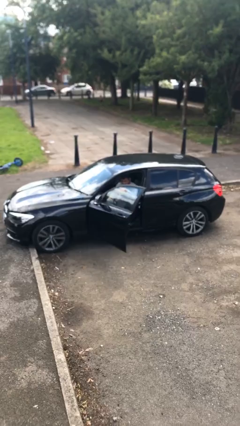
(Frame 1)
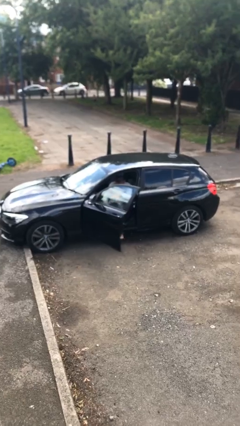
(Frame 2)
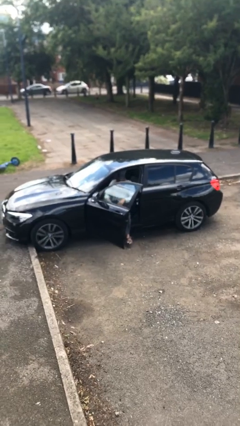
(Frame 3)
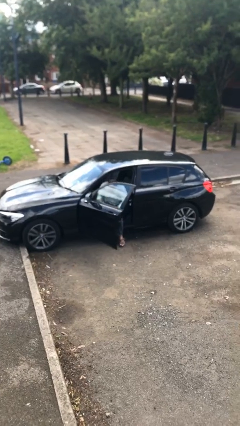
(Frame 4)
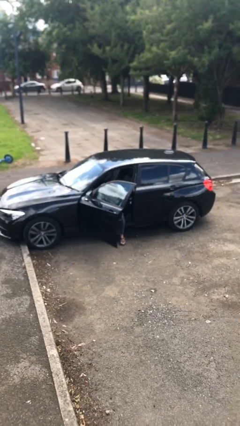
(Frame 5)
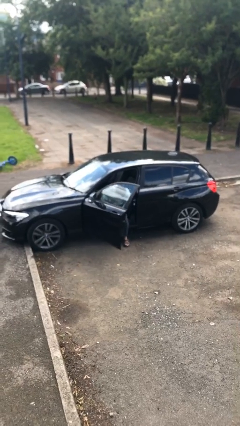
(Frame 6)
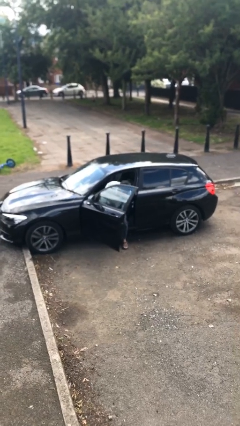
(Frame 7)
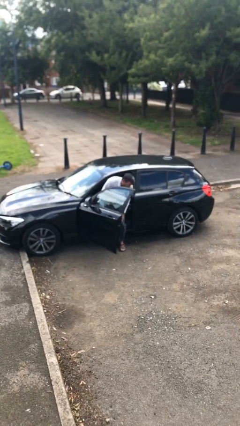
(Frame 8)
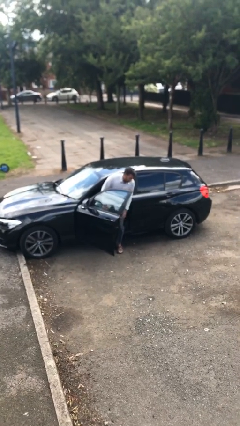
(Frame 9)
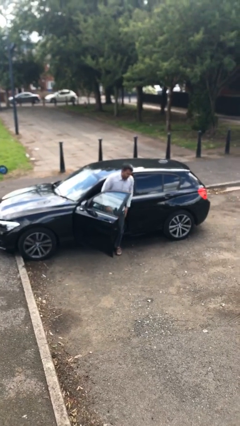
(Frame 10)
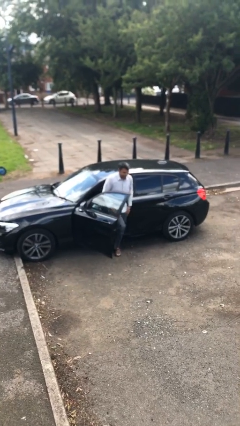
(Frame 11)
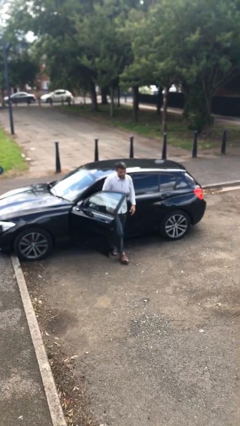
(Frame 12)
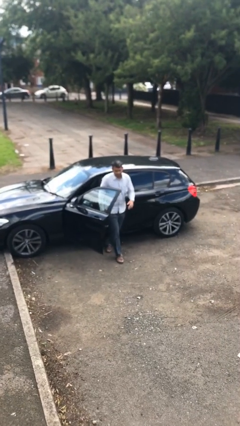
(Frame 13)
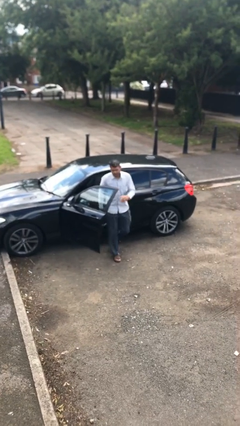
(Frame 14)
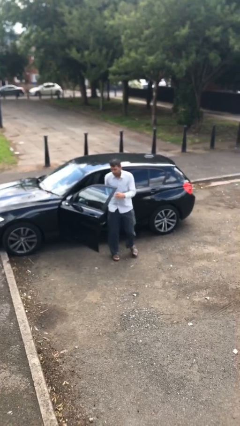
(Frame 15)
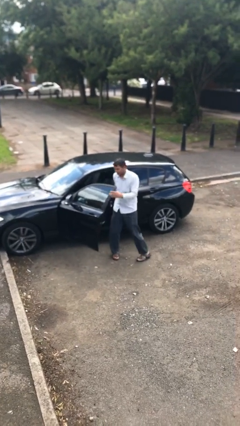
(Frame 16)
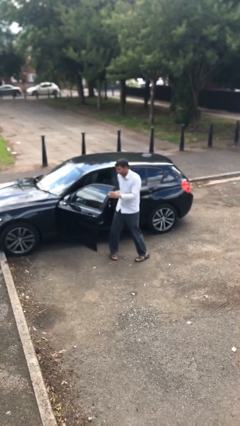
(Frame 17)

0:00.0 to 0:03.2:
person exits car

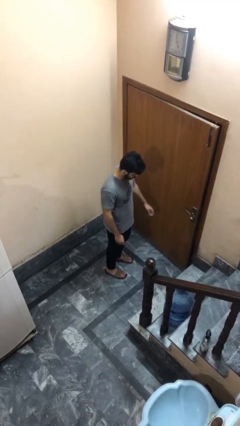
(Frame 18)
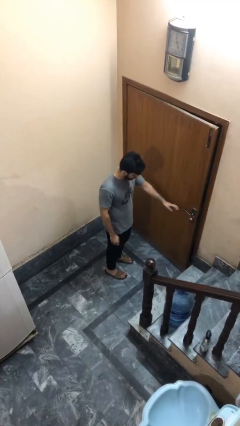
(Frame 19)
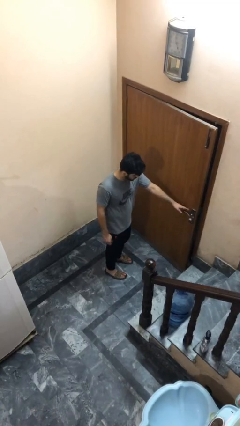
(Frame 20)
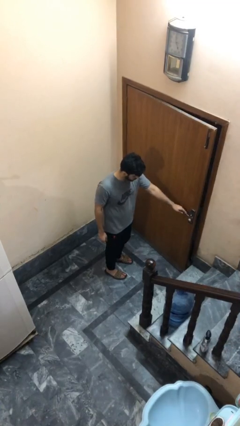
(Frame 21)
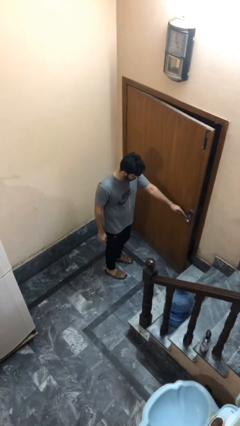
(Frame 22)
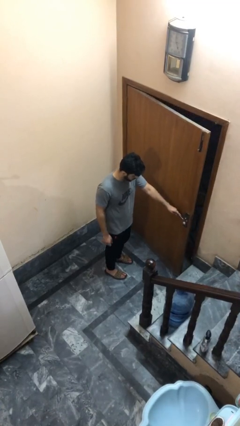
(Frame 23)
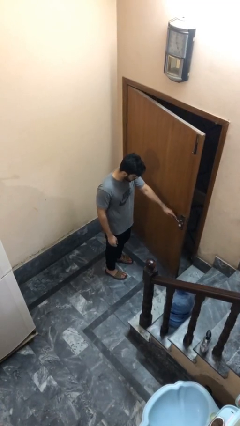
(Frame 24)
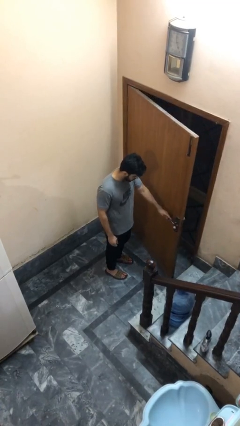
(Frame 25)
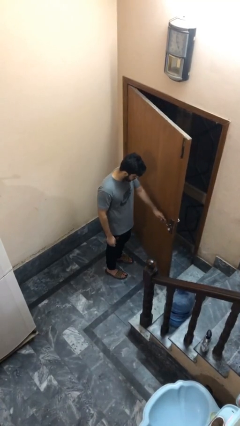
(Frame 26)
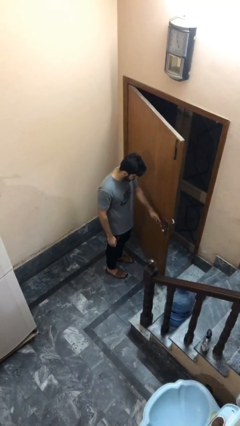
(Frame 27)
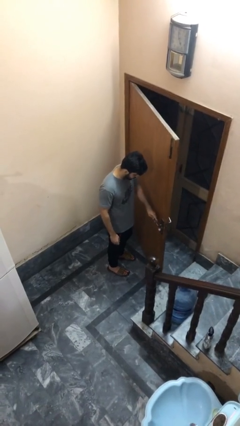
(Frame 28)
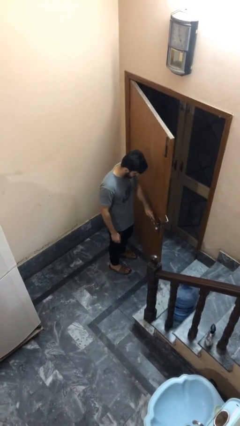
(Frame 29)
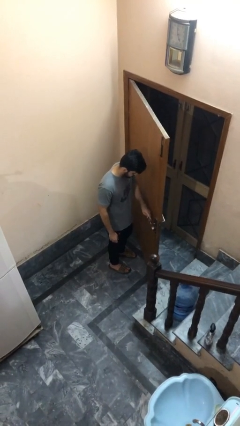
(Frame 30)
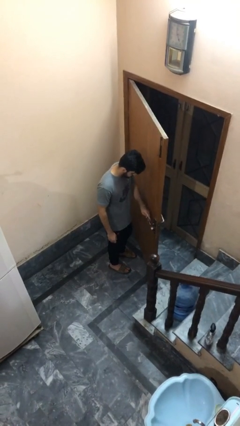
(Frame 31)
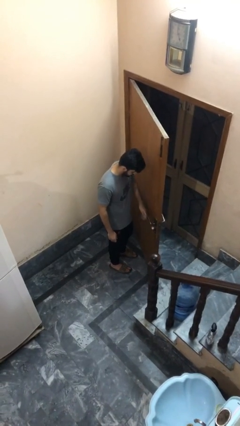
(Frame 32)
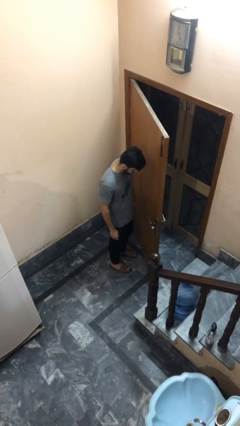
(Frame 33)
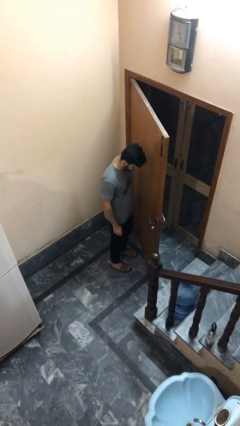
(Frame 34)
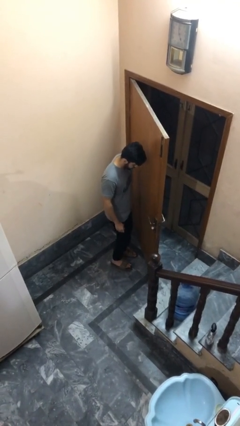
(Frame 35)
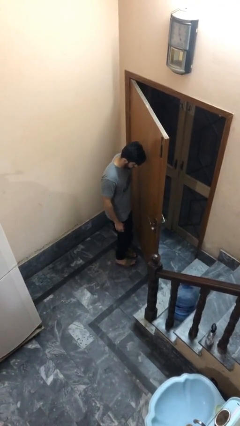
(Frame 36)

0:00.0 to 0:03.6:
person opens facility door

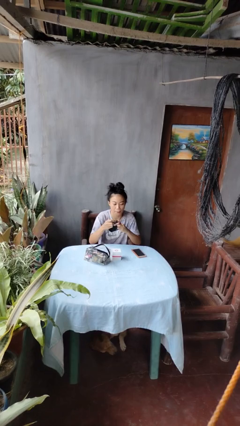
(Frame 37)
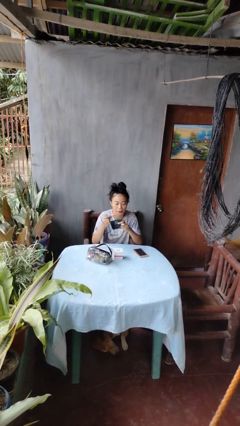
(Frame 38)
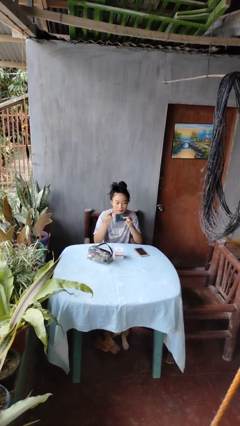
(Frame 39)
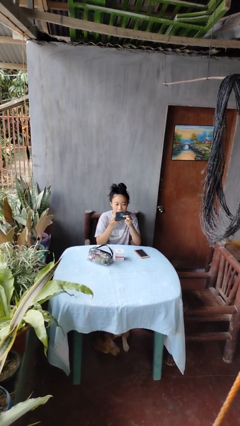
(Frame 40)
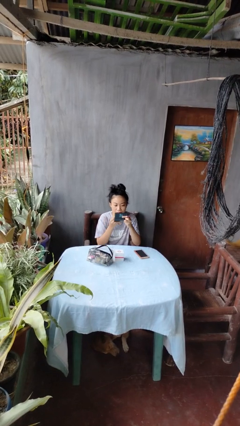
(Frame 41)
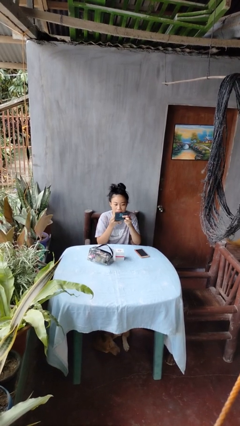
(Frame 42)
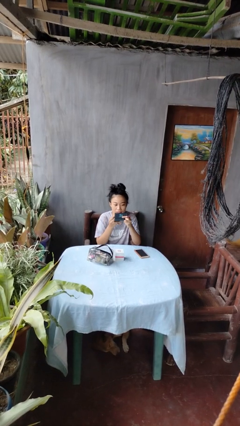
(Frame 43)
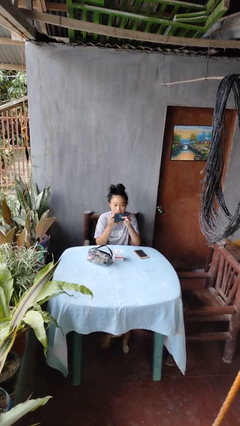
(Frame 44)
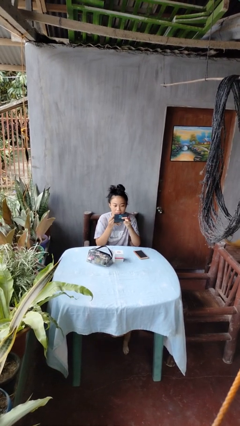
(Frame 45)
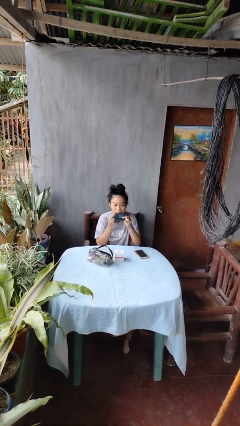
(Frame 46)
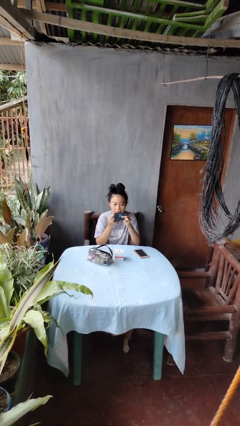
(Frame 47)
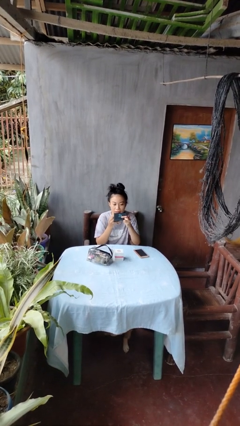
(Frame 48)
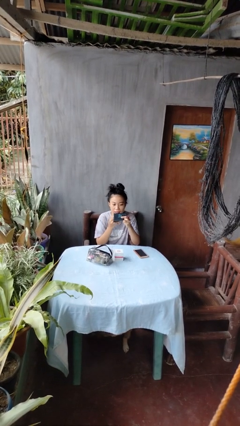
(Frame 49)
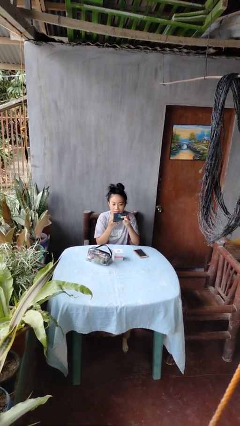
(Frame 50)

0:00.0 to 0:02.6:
person applies lip makeup

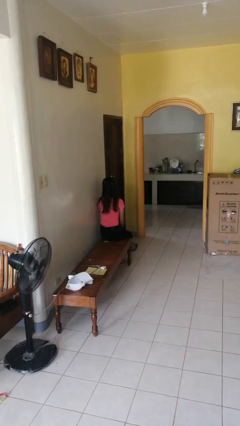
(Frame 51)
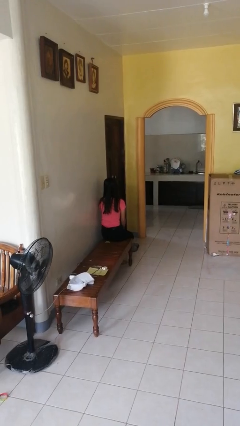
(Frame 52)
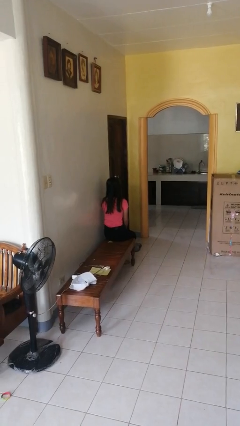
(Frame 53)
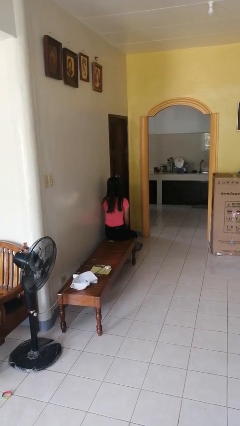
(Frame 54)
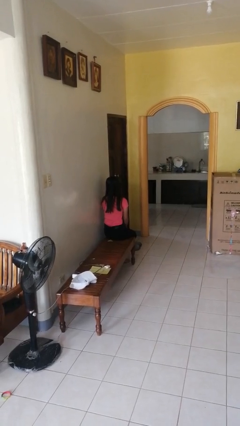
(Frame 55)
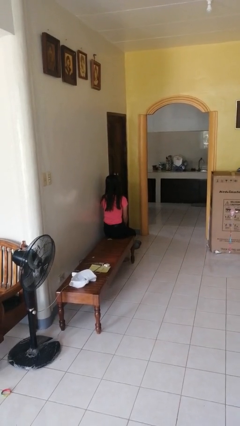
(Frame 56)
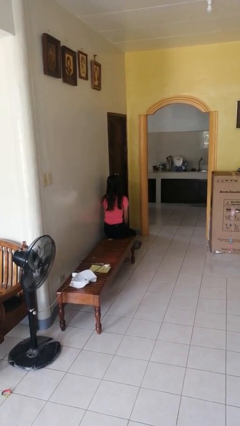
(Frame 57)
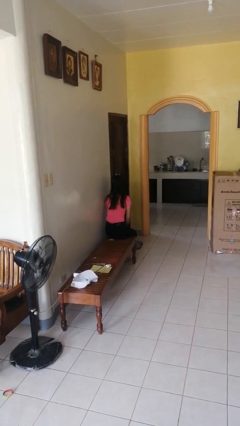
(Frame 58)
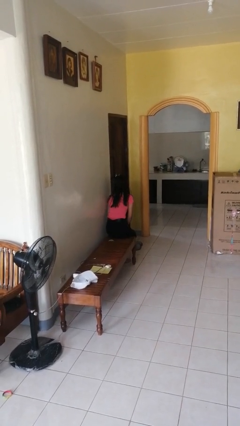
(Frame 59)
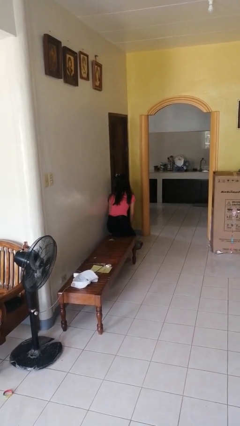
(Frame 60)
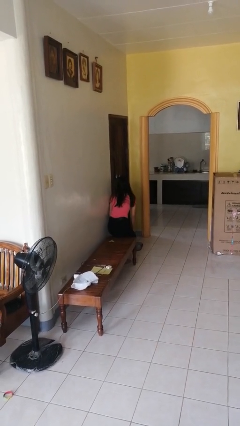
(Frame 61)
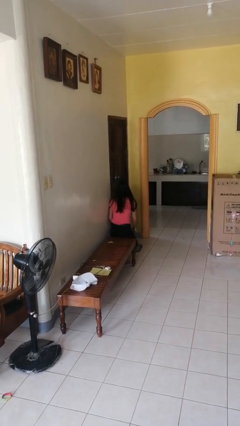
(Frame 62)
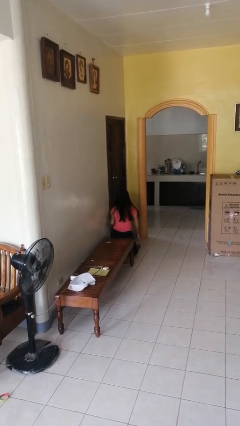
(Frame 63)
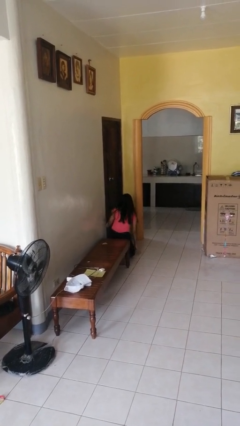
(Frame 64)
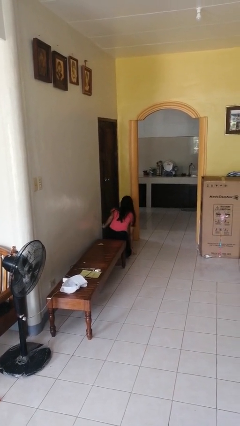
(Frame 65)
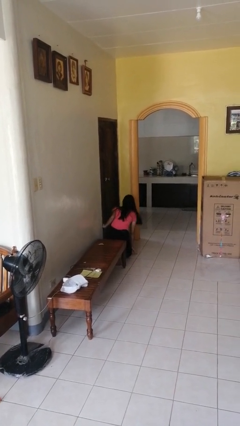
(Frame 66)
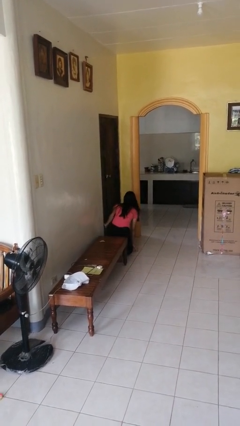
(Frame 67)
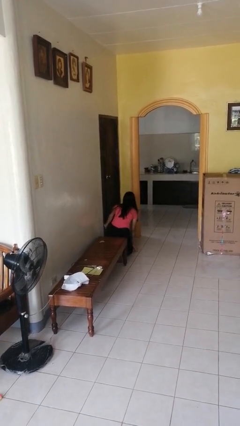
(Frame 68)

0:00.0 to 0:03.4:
person falls from chair

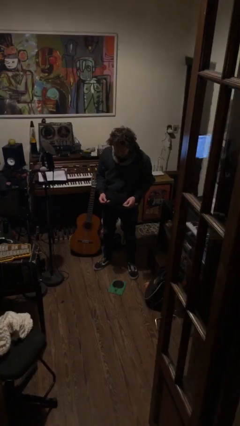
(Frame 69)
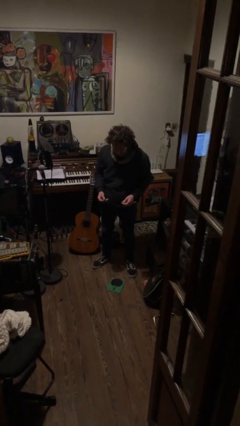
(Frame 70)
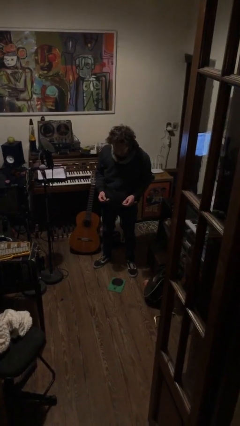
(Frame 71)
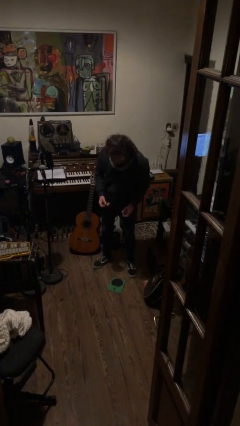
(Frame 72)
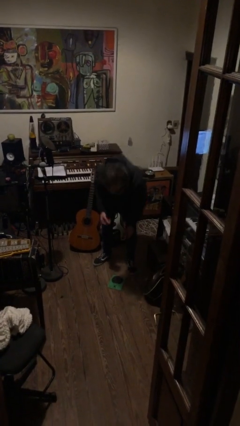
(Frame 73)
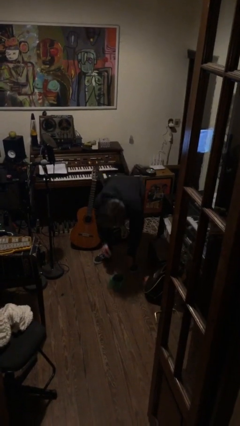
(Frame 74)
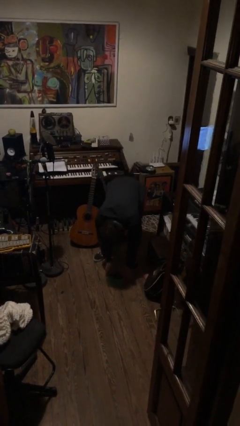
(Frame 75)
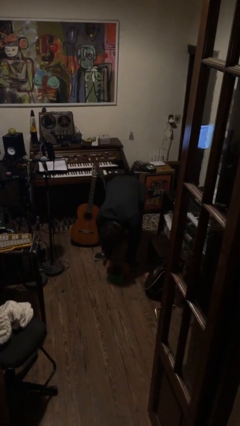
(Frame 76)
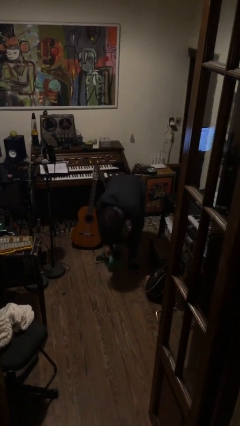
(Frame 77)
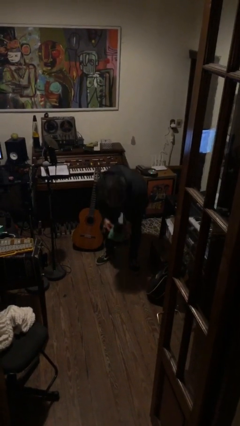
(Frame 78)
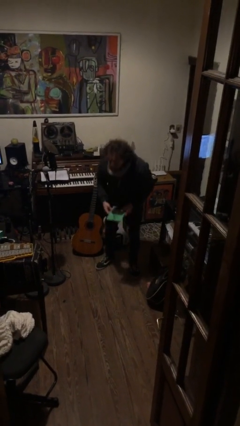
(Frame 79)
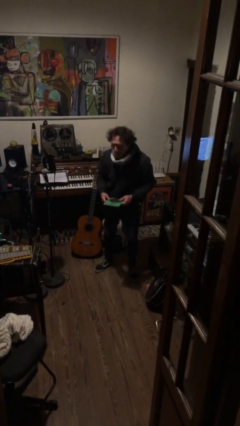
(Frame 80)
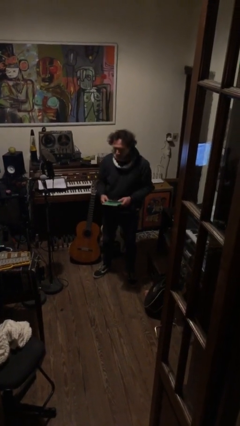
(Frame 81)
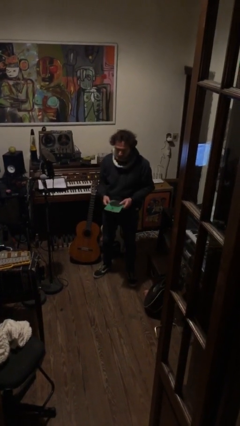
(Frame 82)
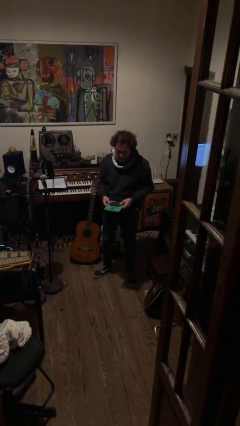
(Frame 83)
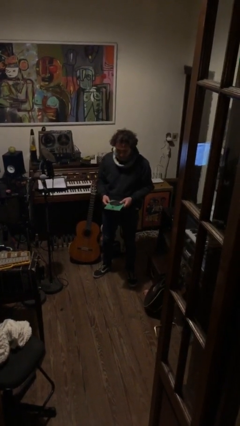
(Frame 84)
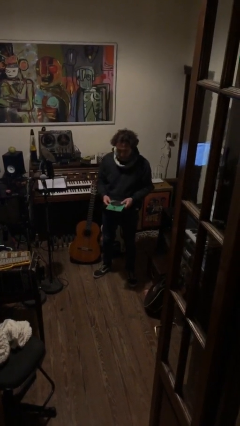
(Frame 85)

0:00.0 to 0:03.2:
person picks up object from floor

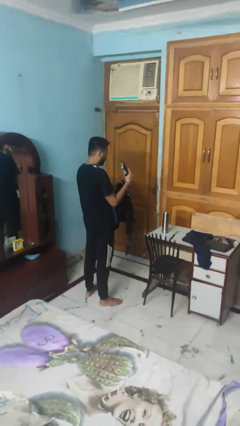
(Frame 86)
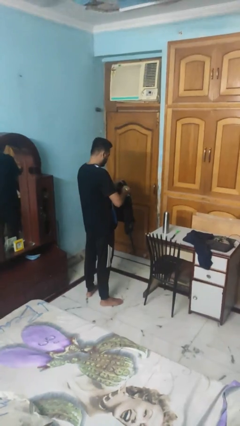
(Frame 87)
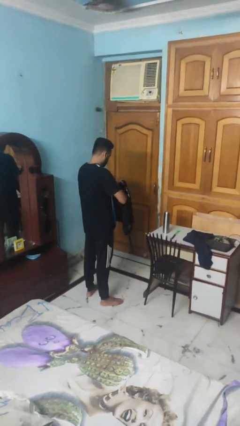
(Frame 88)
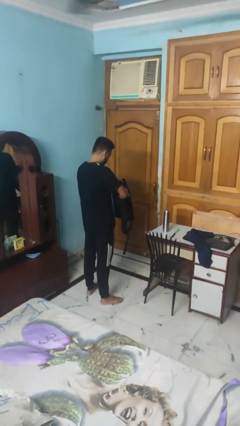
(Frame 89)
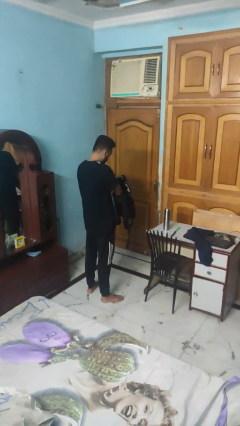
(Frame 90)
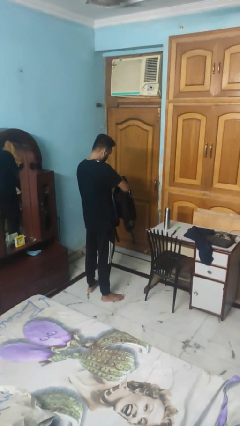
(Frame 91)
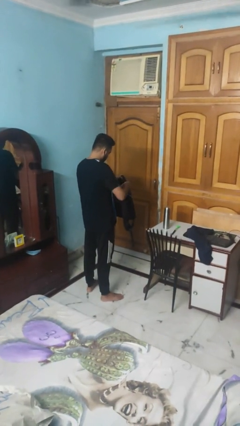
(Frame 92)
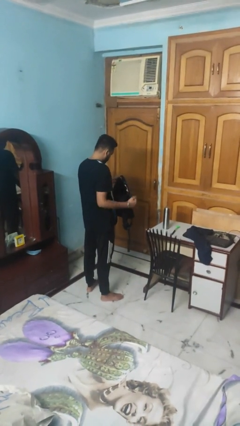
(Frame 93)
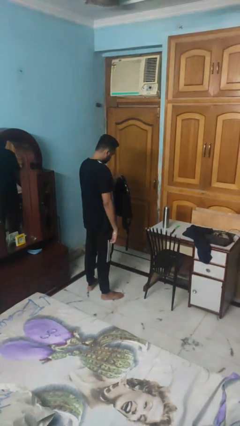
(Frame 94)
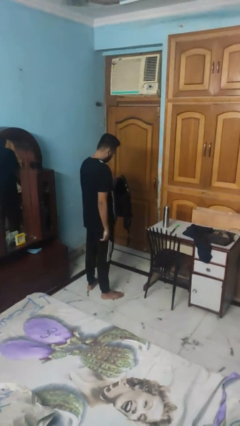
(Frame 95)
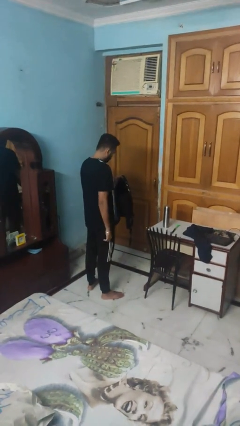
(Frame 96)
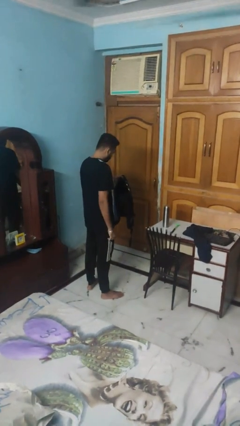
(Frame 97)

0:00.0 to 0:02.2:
person puts object into backpack
